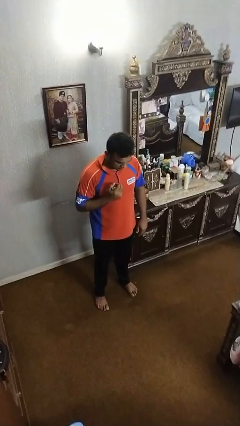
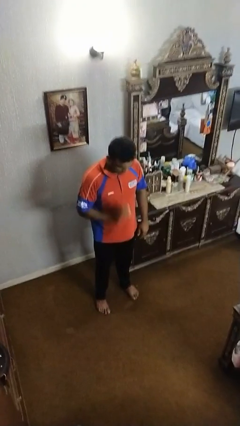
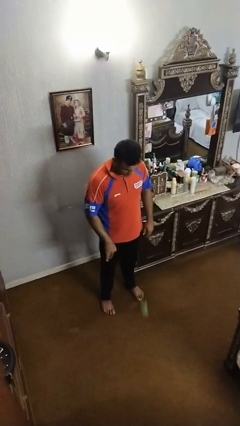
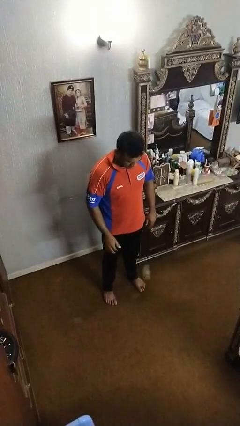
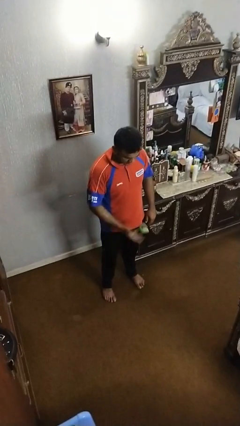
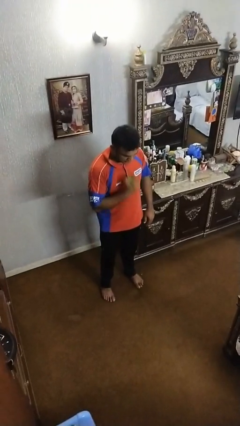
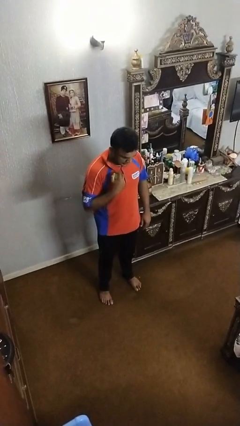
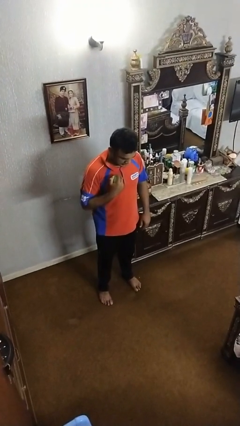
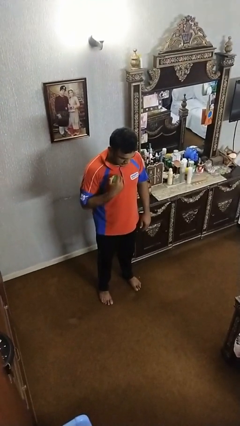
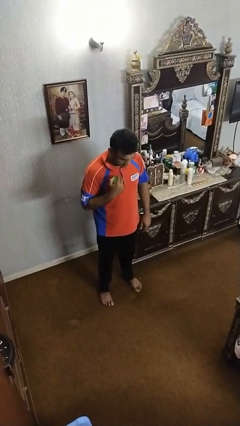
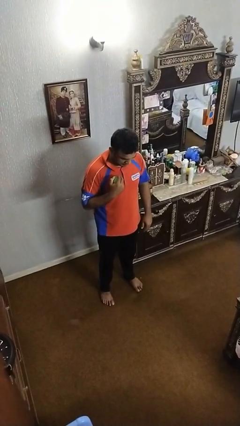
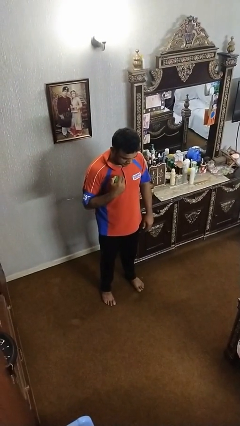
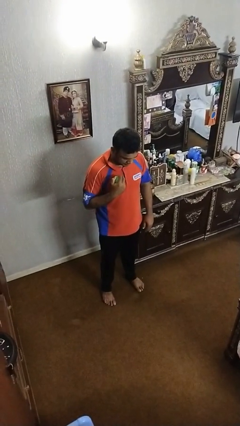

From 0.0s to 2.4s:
person bounces ball on floor

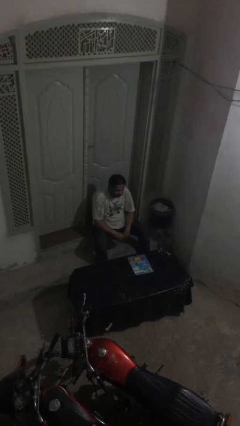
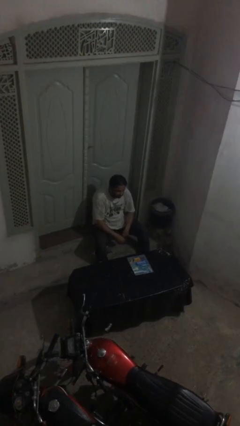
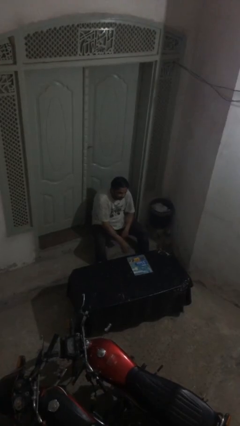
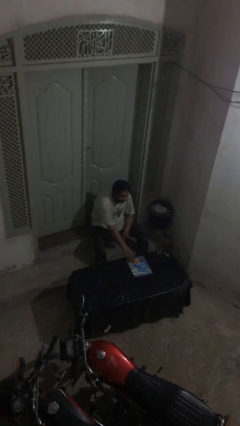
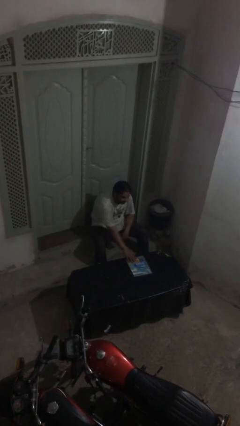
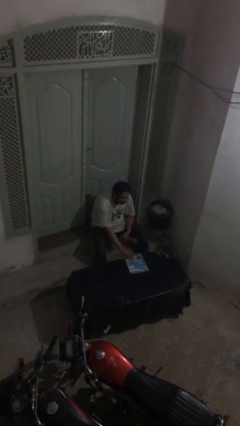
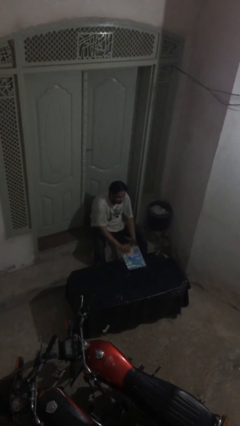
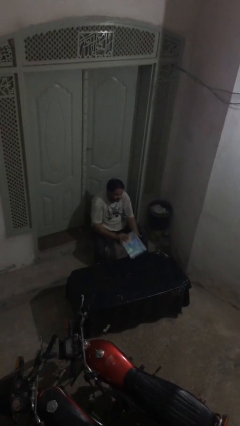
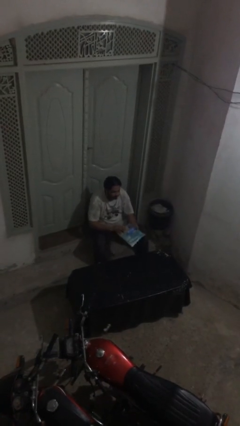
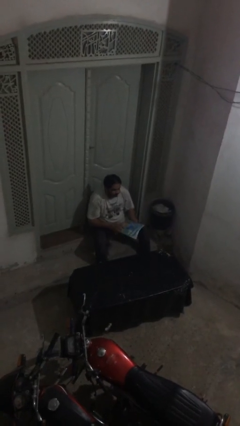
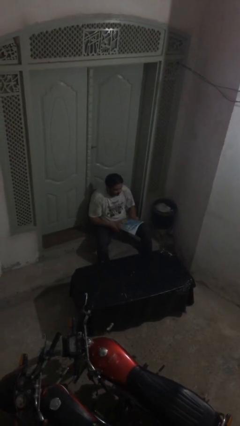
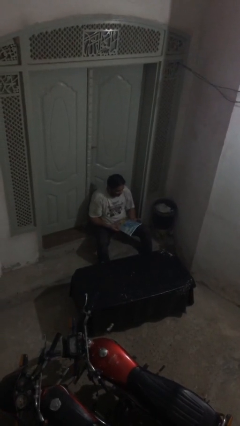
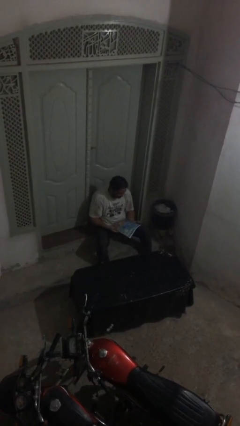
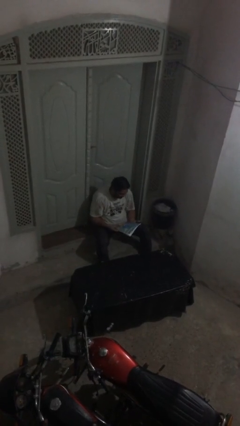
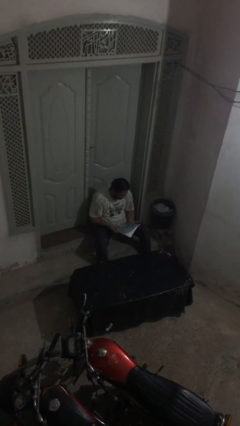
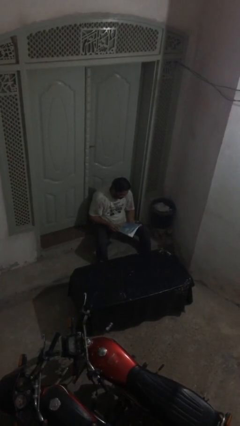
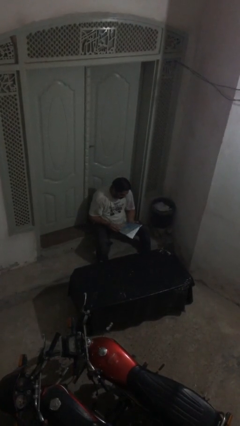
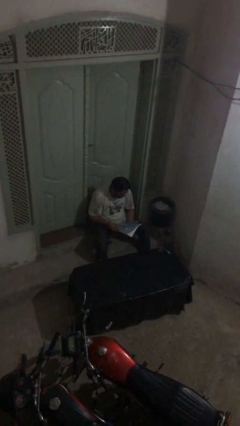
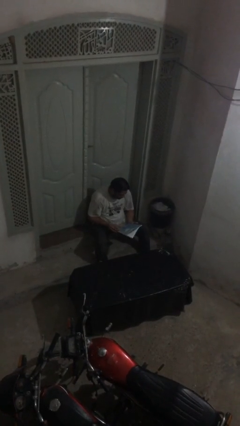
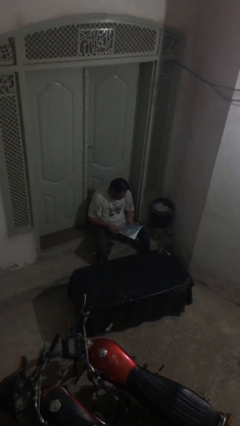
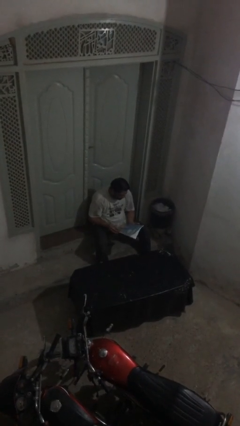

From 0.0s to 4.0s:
person picks up object from table

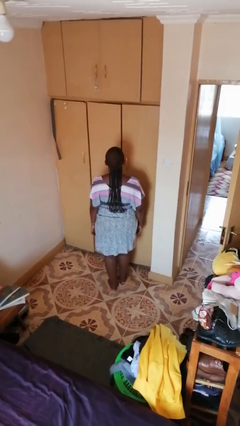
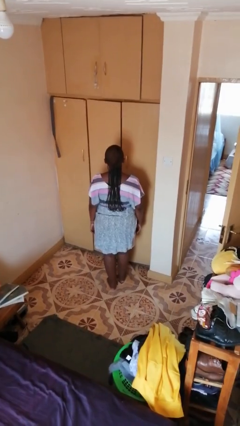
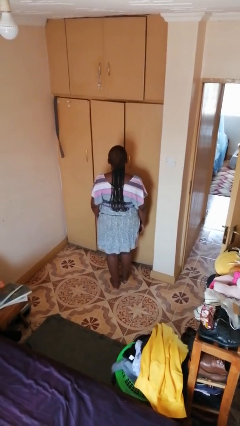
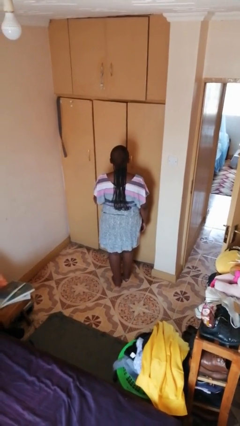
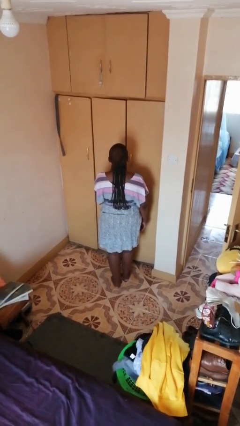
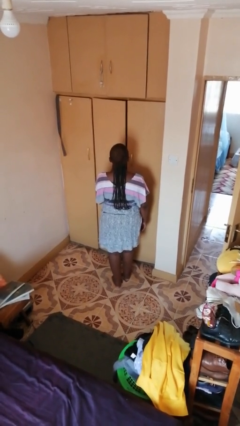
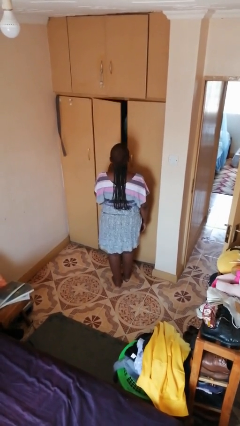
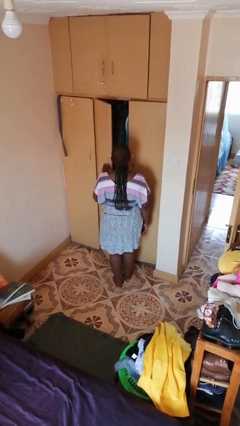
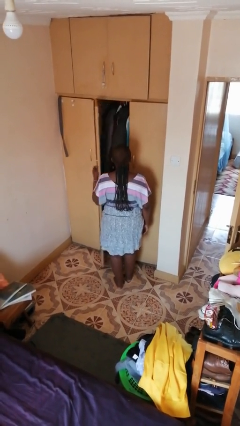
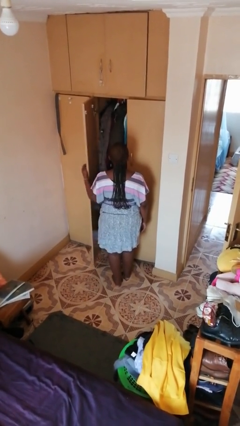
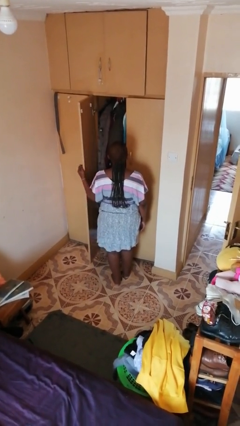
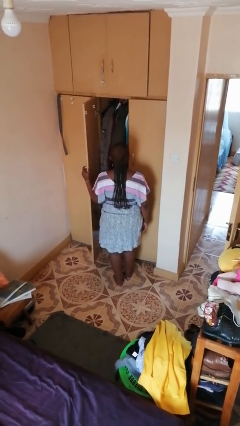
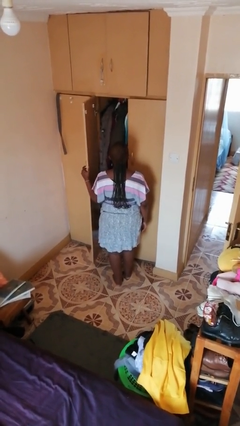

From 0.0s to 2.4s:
person opens closet door

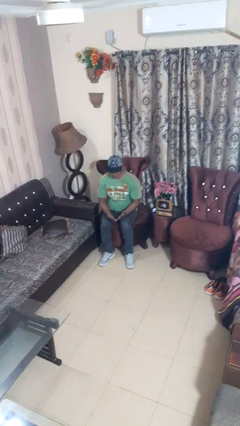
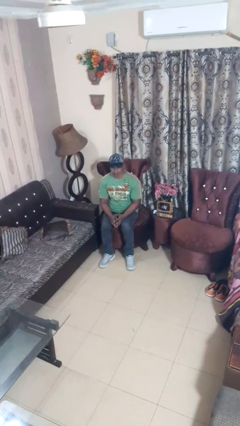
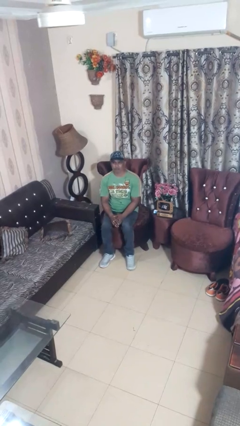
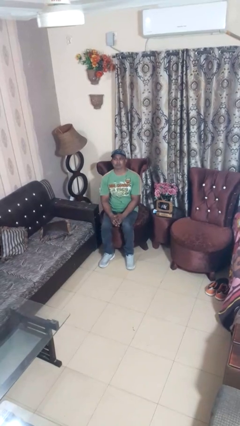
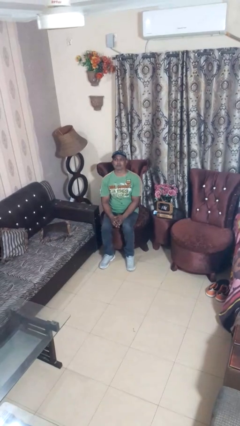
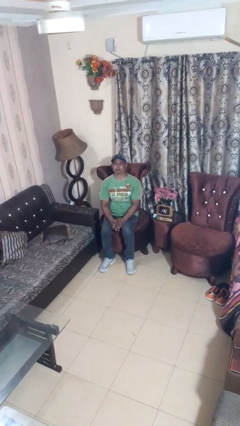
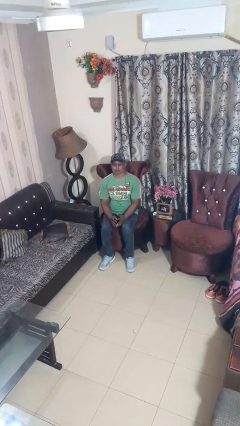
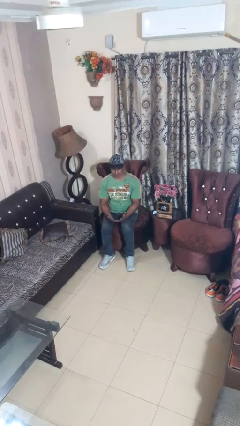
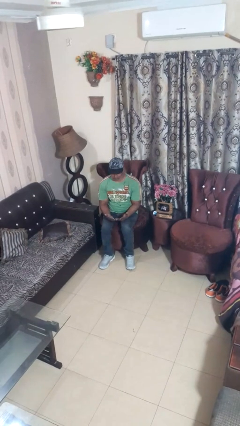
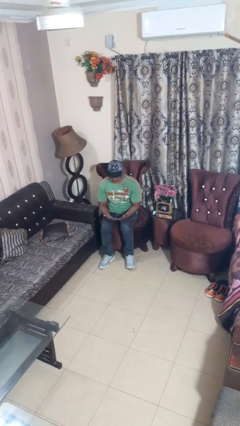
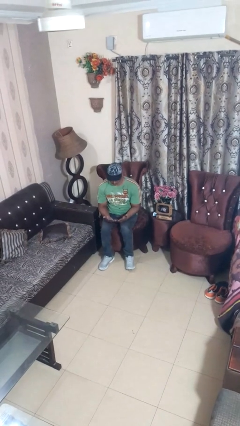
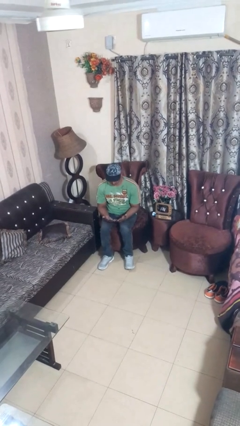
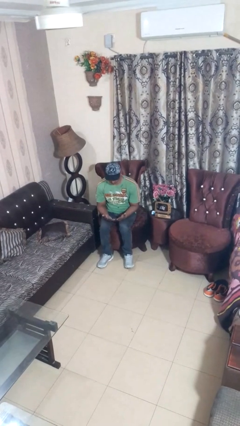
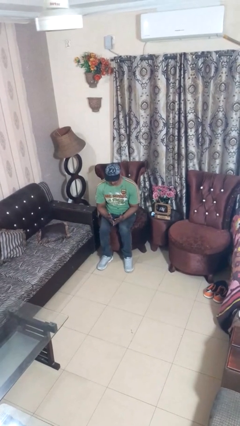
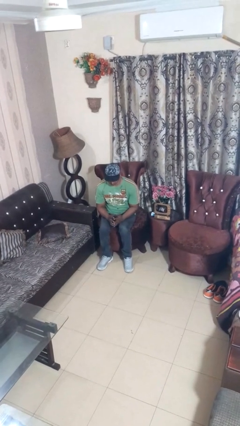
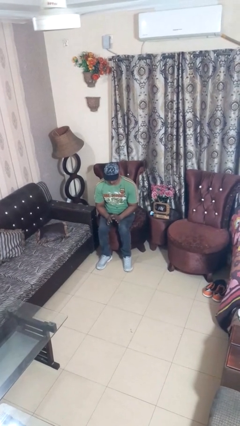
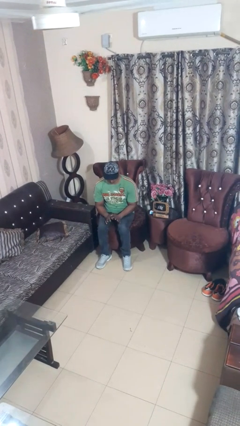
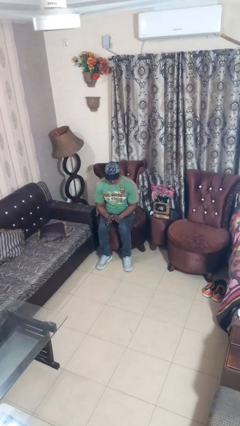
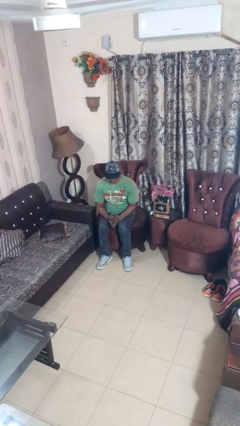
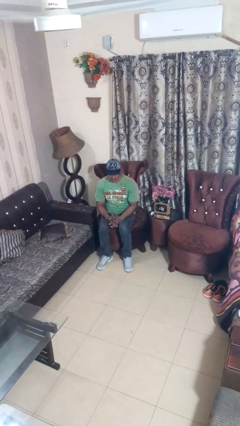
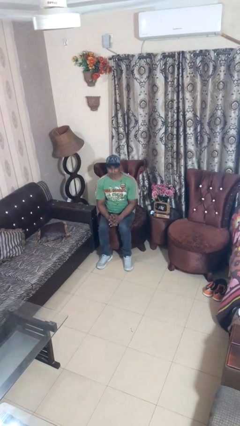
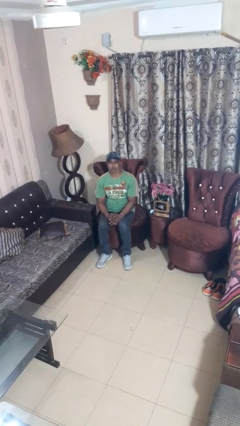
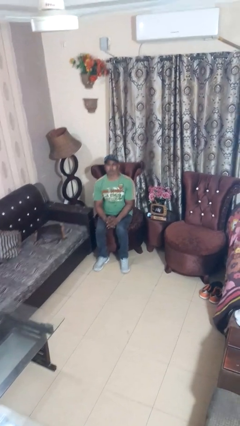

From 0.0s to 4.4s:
person looks at hands in lap

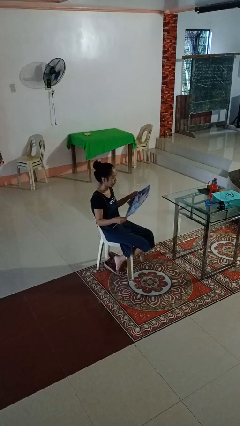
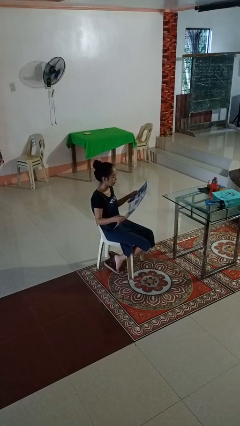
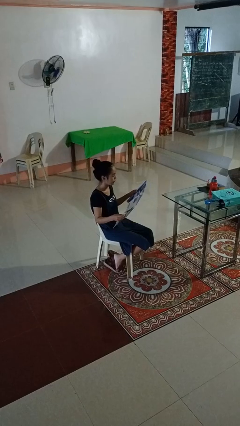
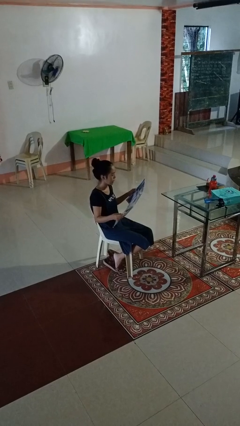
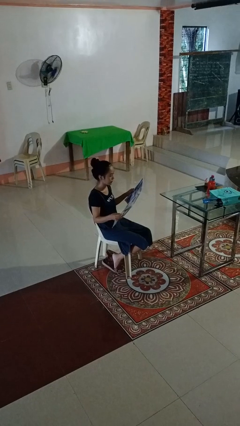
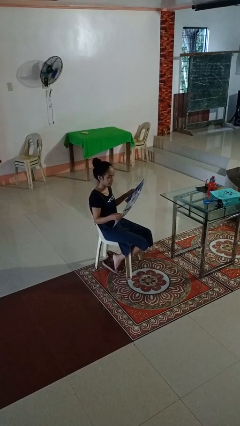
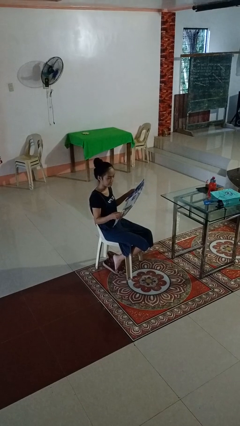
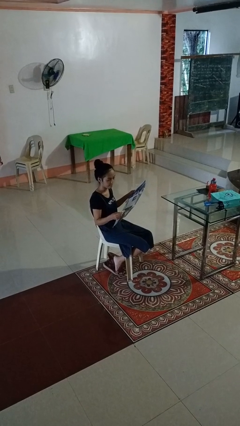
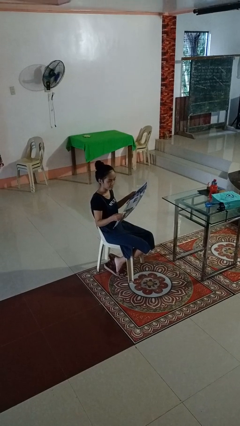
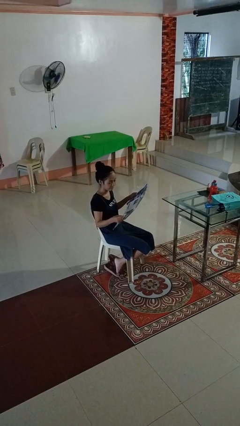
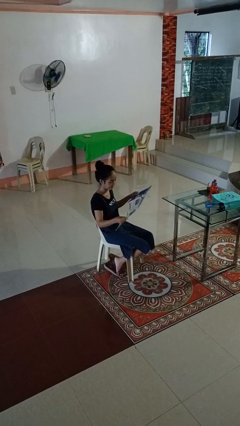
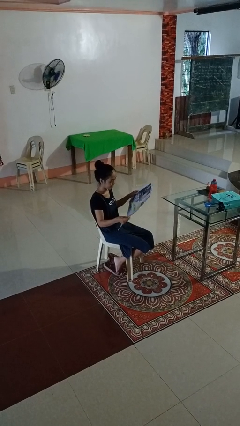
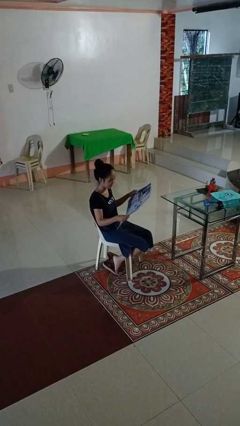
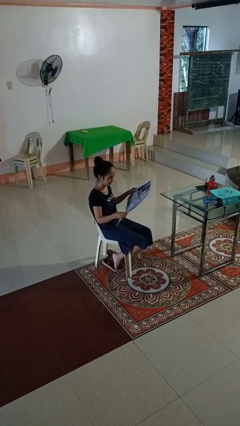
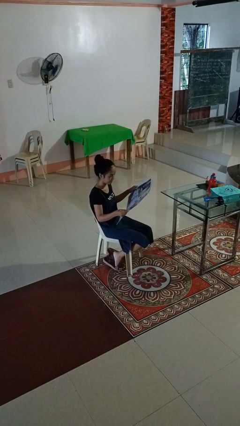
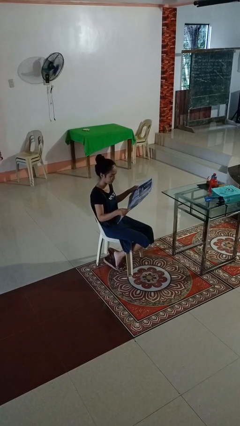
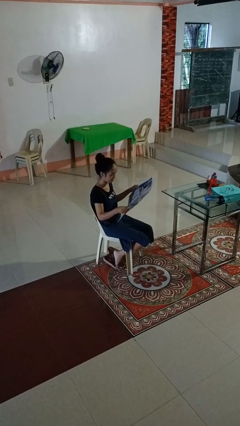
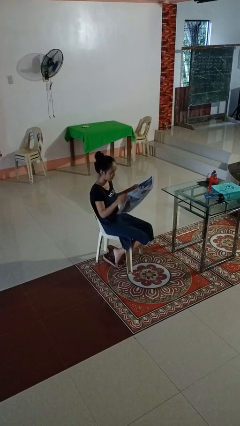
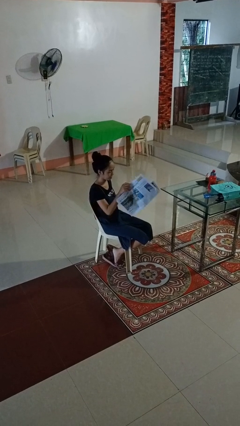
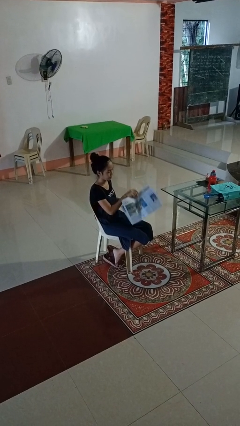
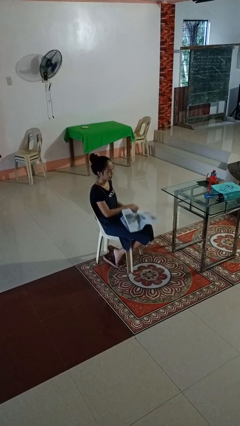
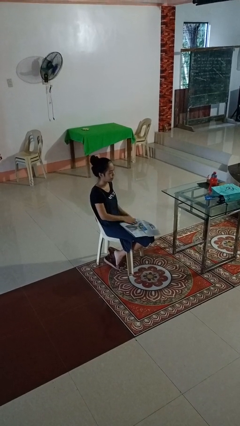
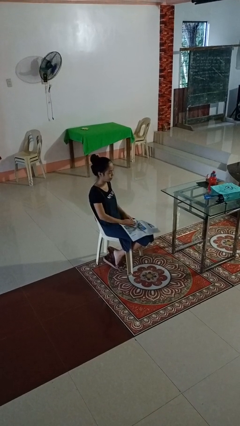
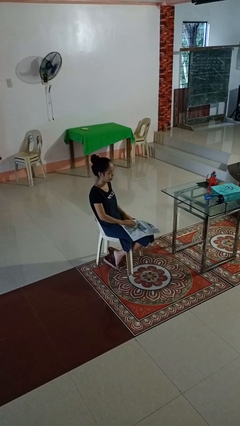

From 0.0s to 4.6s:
person reads newspaper
